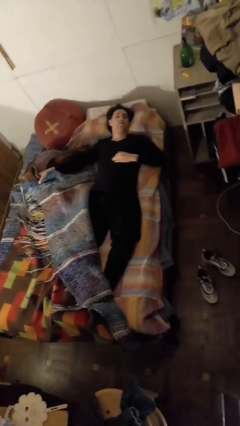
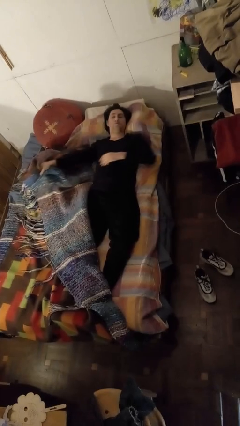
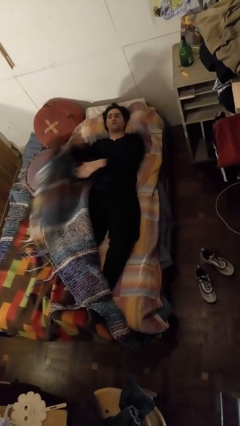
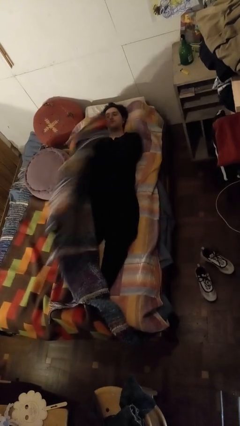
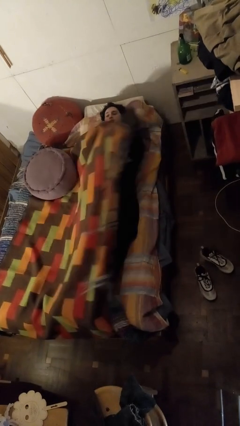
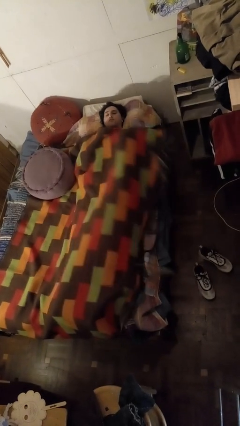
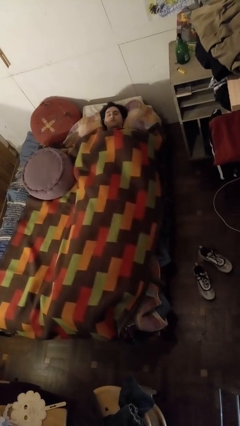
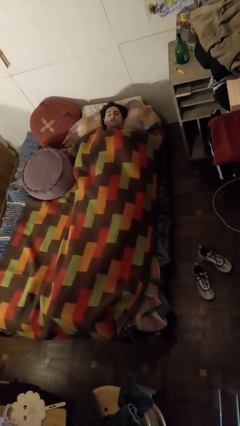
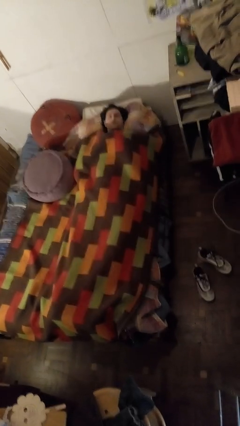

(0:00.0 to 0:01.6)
person covers with bedsheets

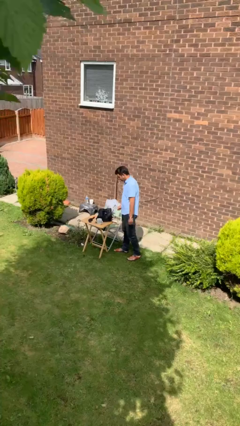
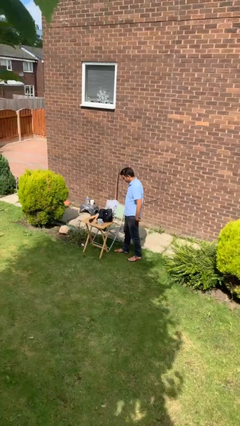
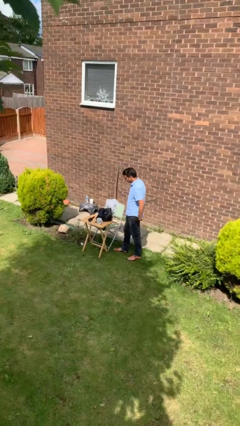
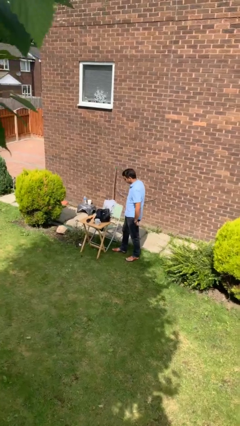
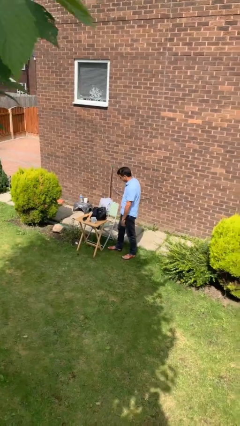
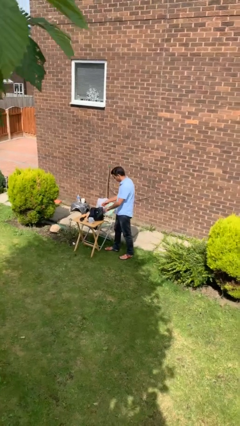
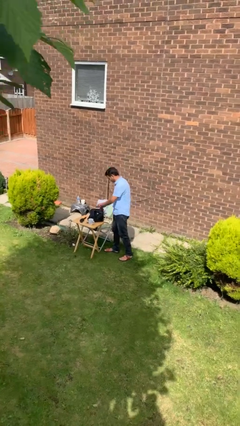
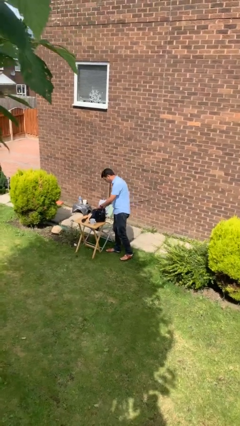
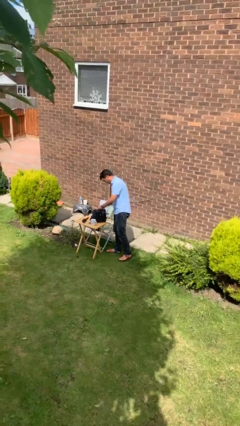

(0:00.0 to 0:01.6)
person searches in backpack

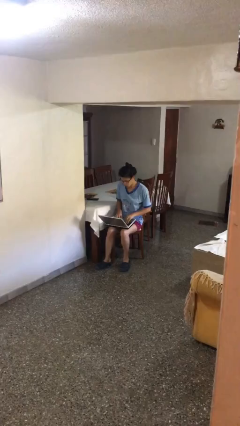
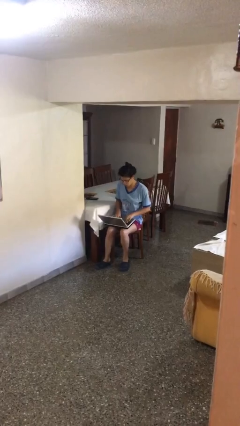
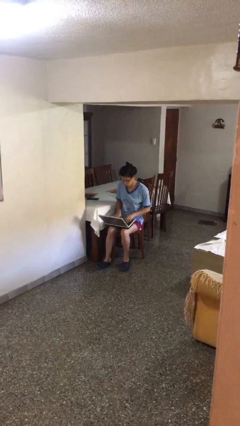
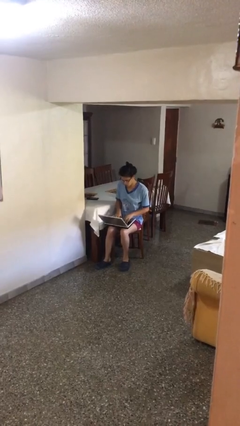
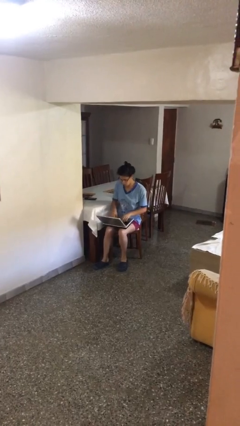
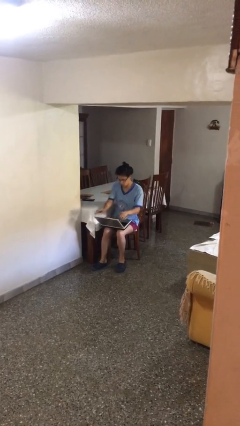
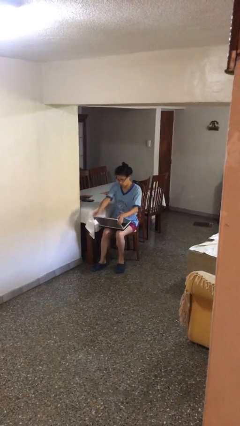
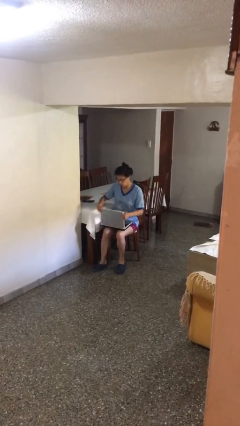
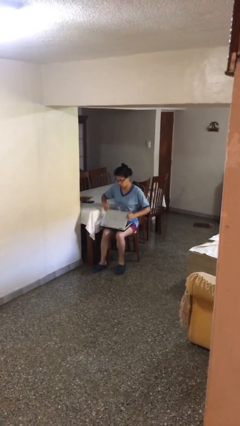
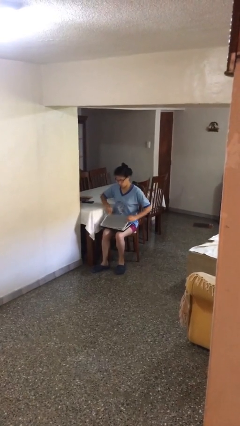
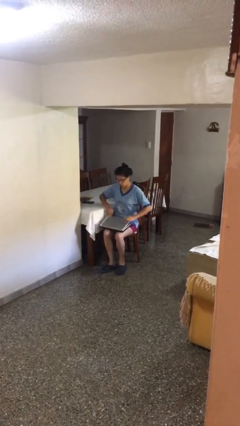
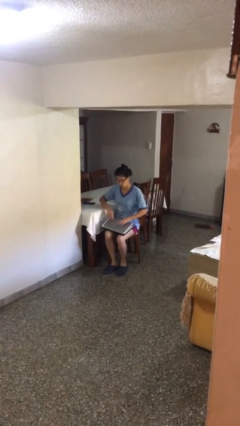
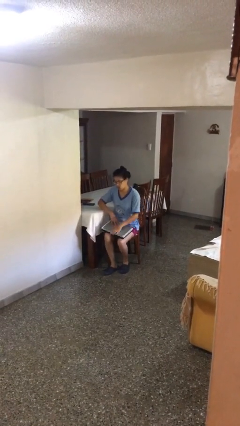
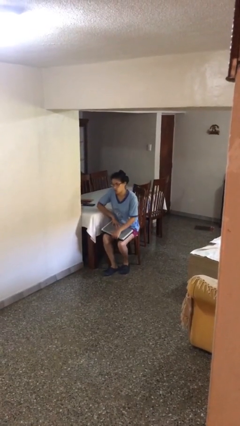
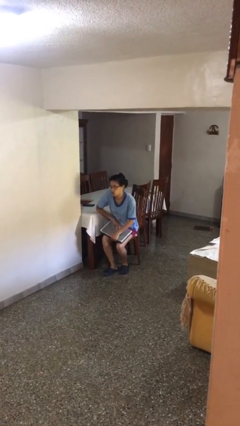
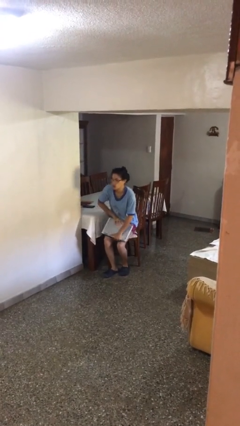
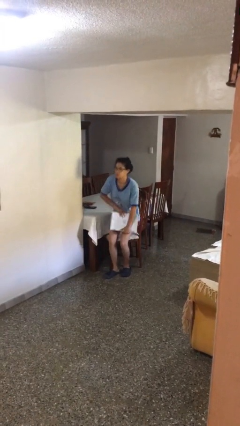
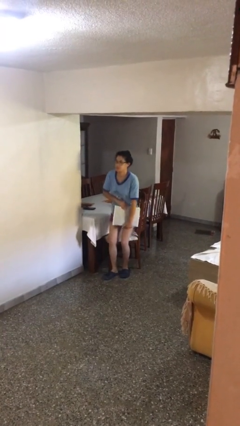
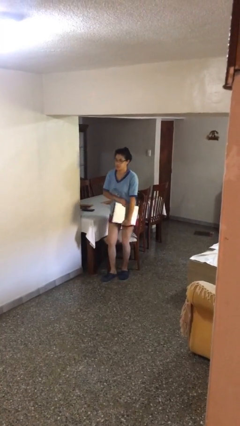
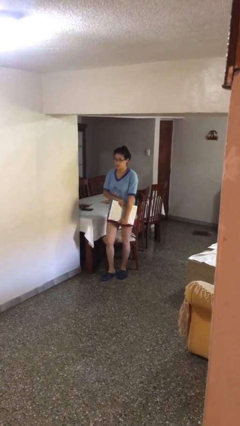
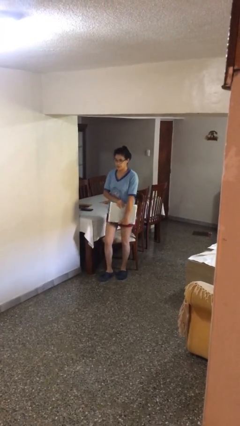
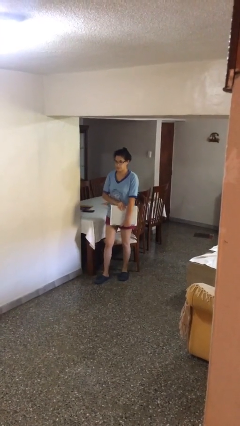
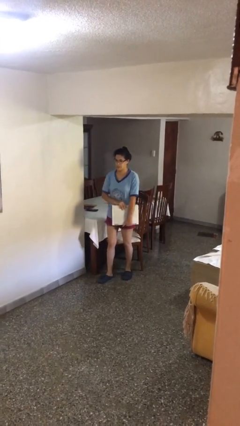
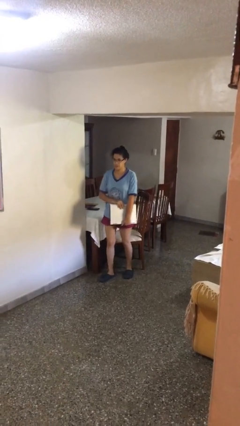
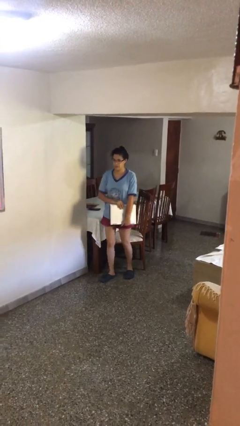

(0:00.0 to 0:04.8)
person stands up

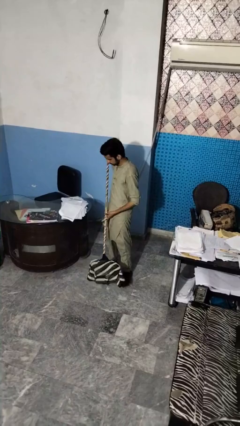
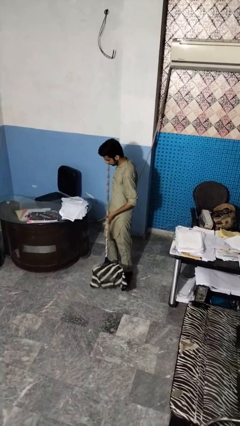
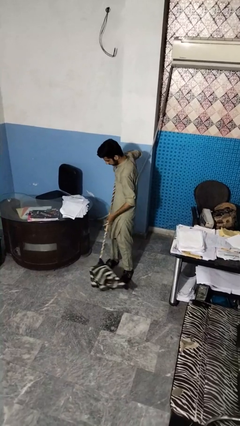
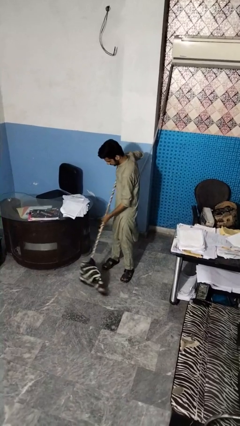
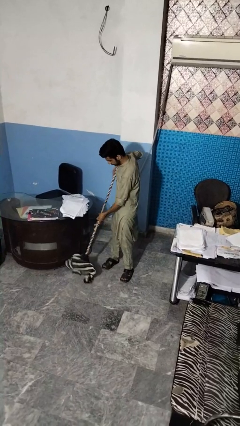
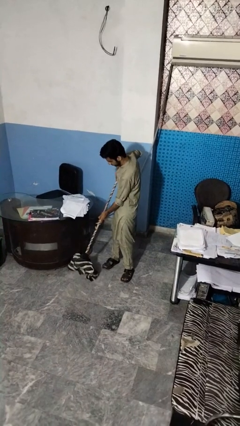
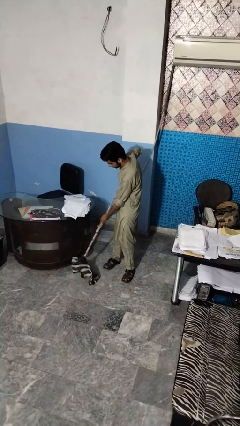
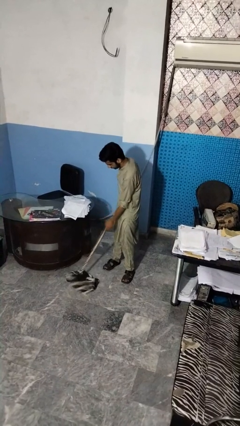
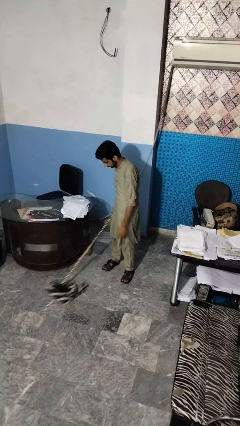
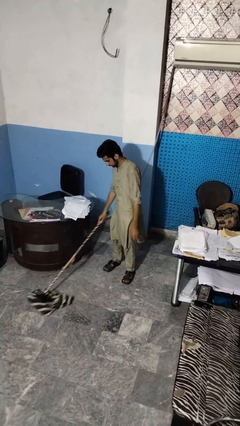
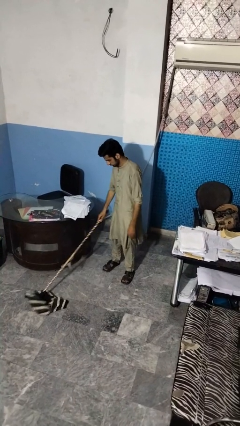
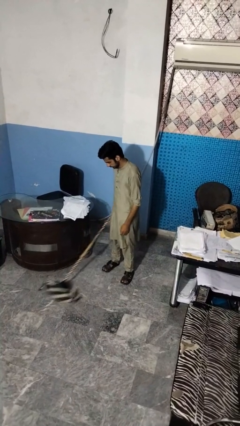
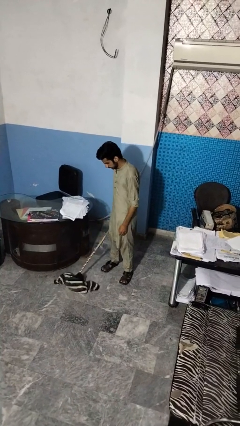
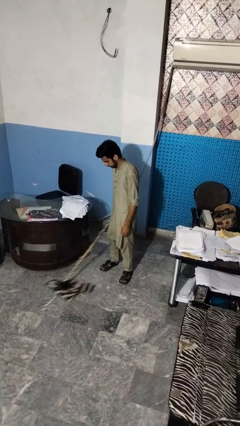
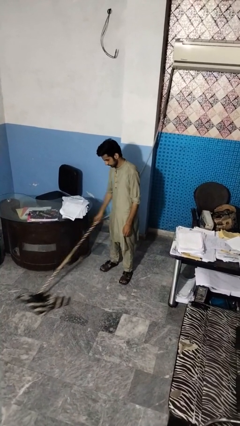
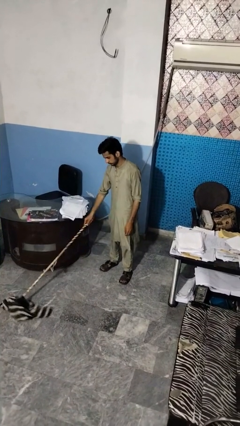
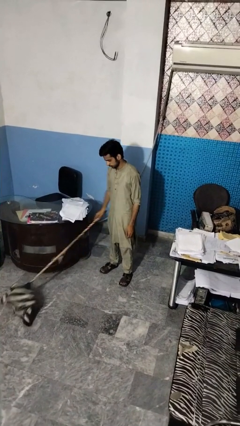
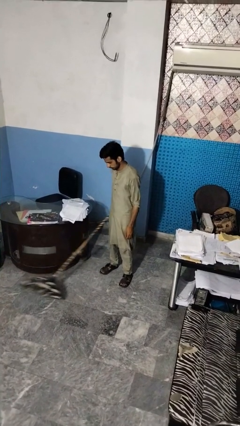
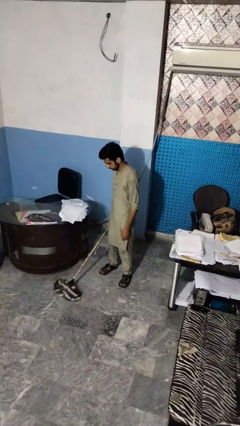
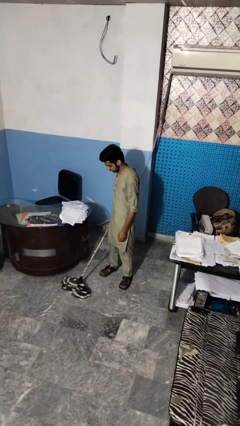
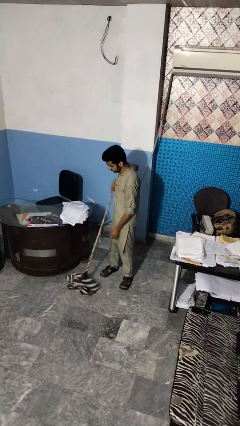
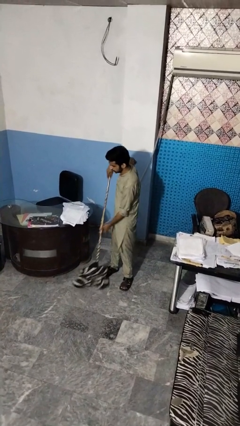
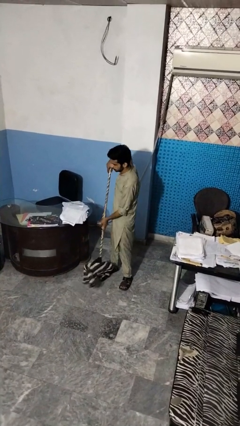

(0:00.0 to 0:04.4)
person mops

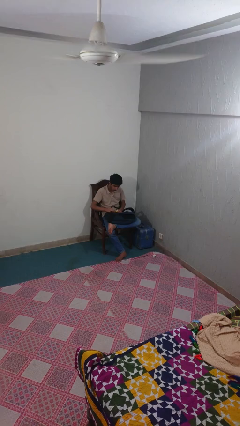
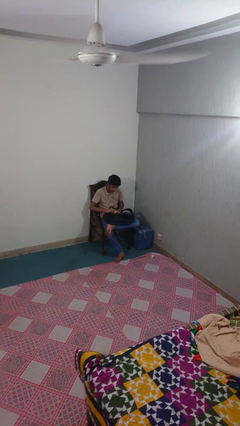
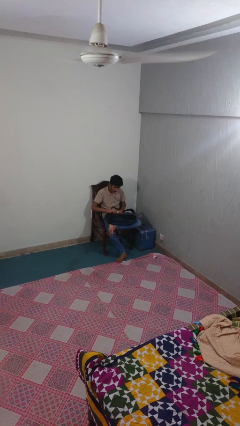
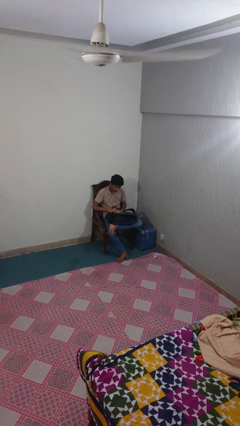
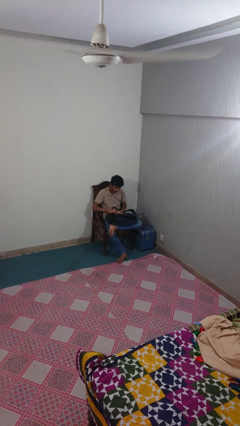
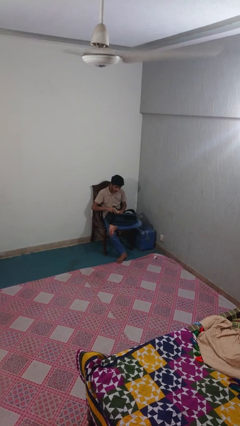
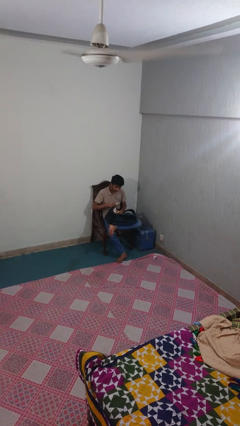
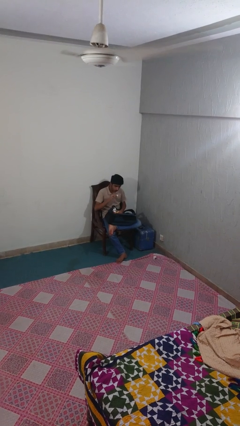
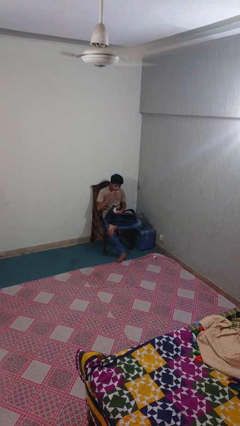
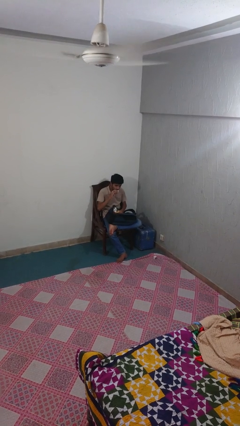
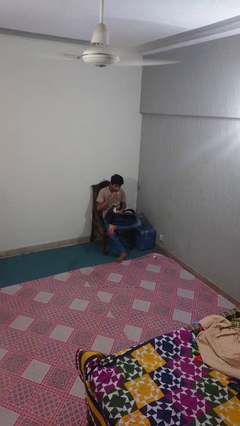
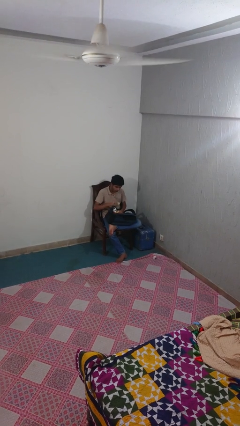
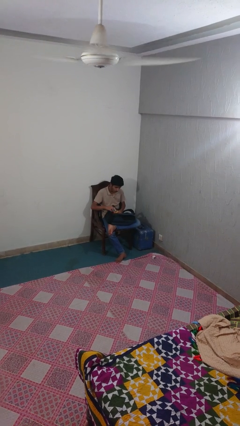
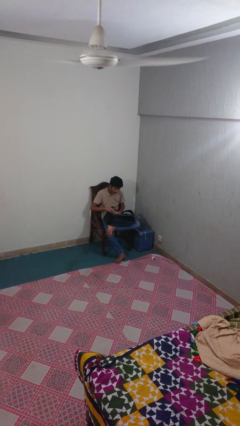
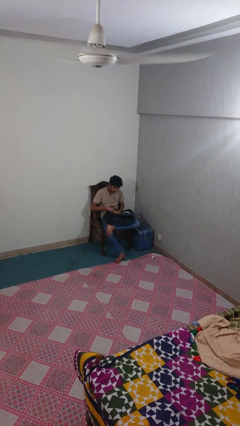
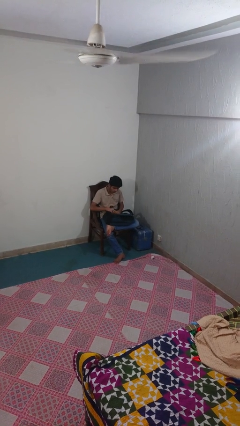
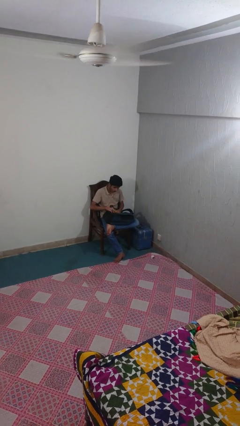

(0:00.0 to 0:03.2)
person eats snack from bag

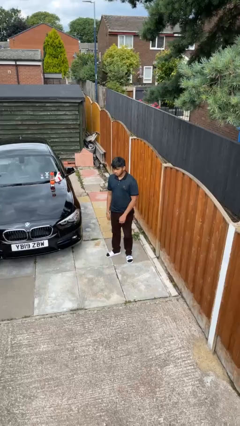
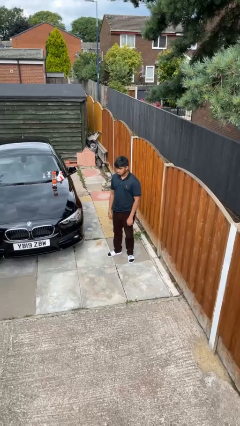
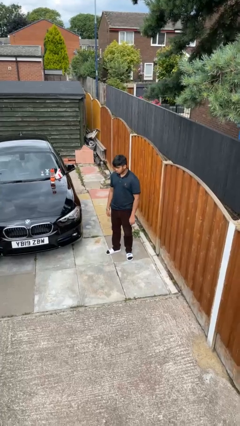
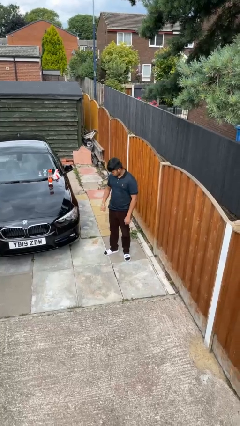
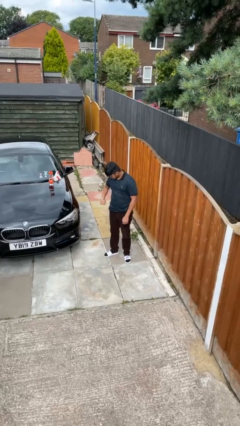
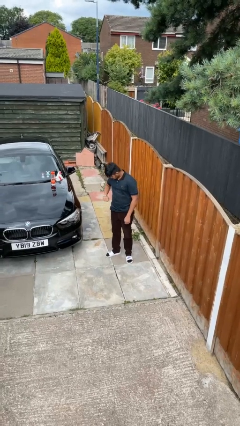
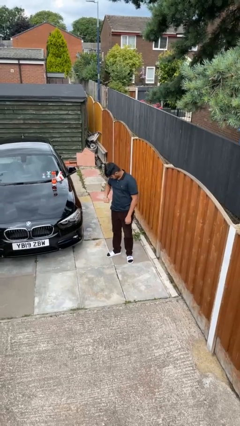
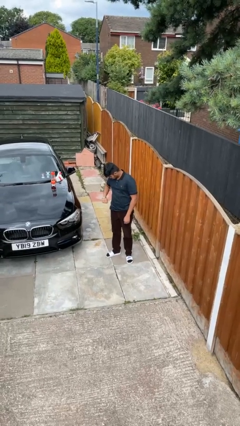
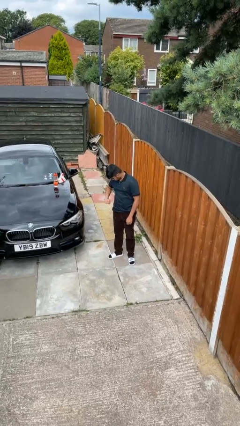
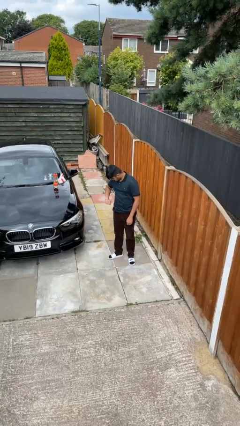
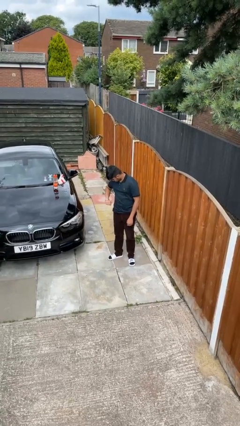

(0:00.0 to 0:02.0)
person looks at wristwatch
